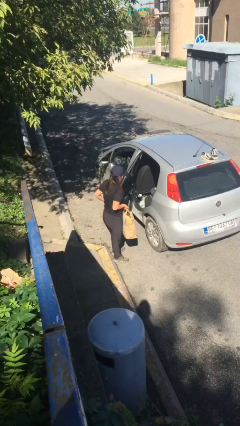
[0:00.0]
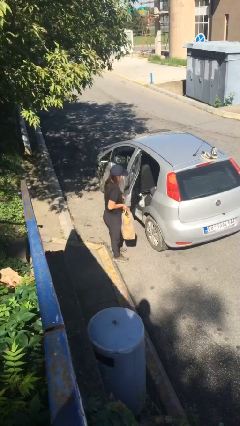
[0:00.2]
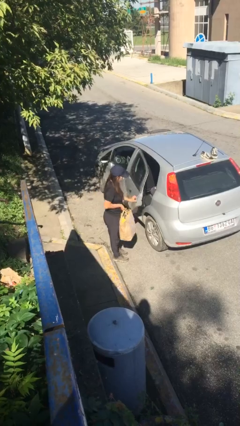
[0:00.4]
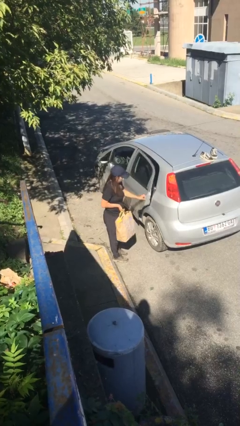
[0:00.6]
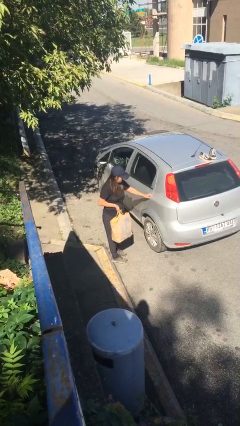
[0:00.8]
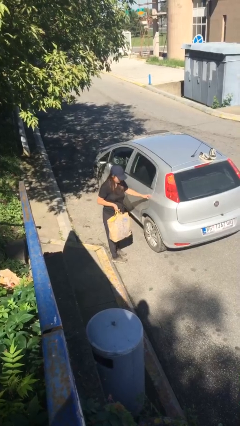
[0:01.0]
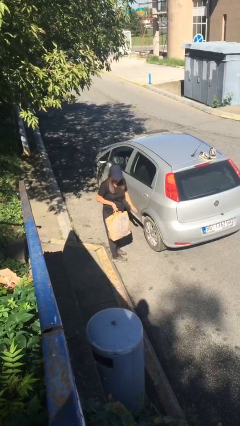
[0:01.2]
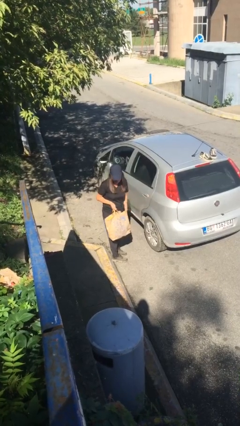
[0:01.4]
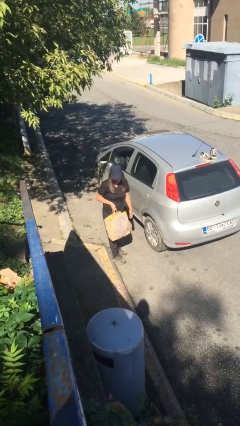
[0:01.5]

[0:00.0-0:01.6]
person closes car door

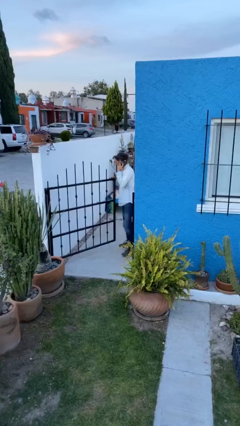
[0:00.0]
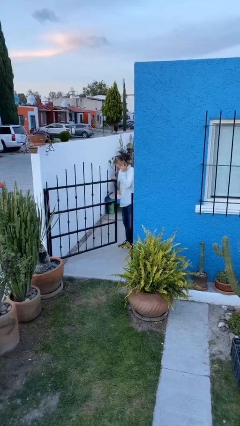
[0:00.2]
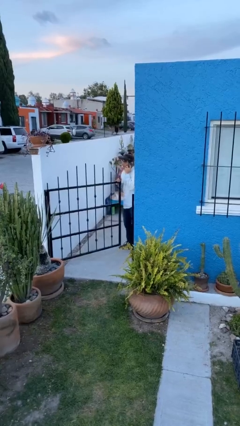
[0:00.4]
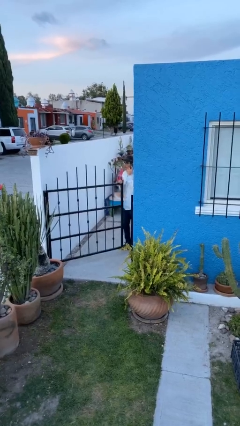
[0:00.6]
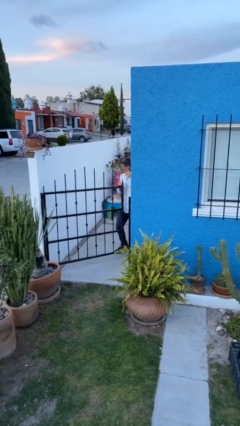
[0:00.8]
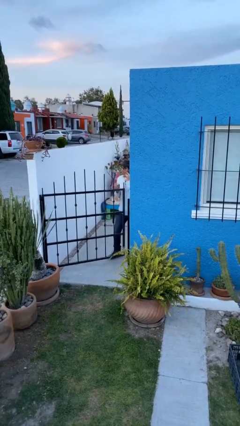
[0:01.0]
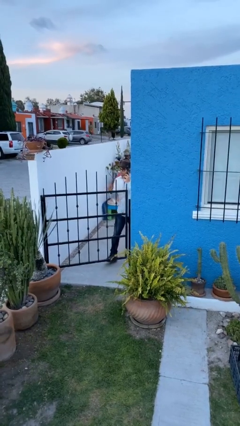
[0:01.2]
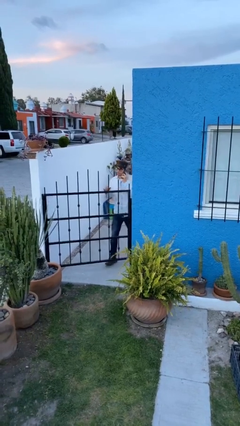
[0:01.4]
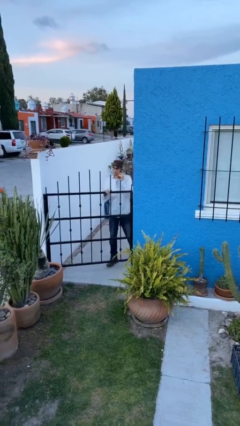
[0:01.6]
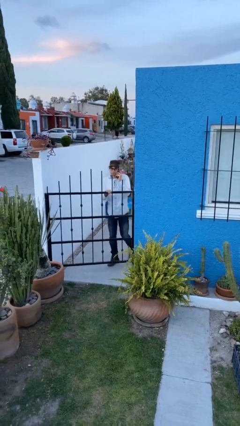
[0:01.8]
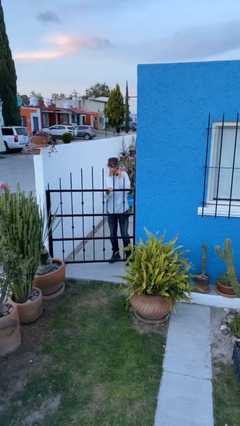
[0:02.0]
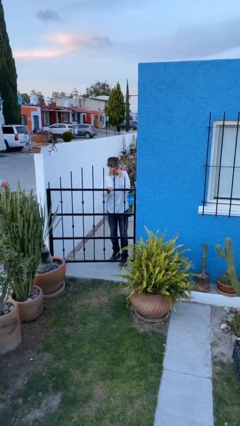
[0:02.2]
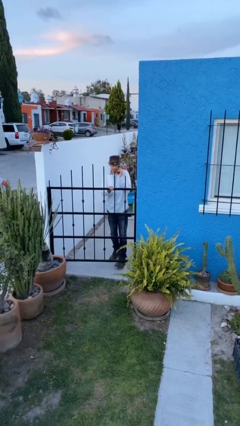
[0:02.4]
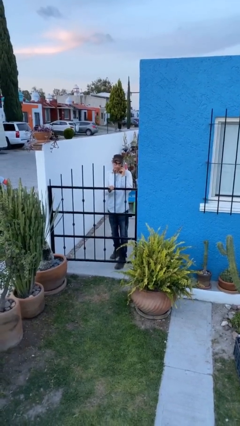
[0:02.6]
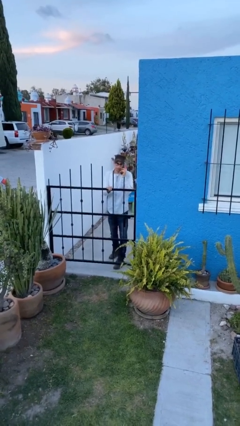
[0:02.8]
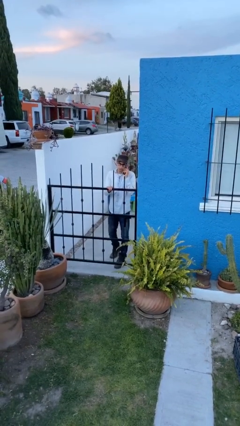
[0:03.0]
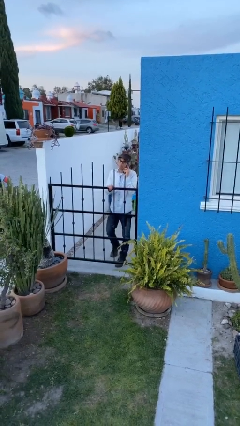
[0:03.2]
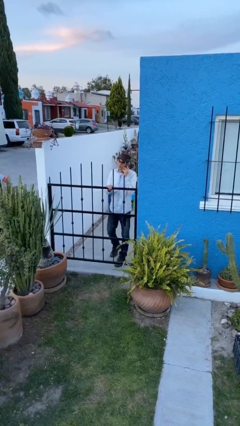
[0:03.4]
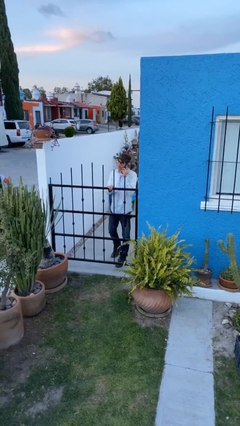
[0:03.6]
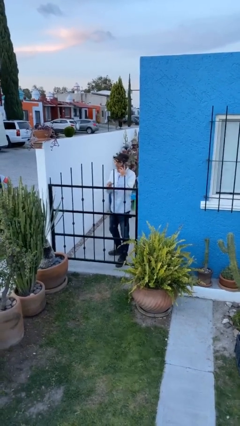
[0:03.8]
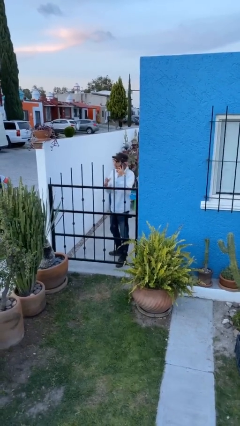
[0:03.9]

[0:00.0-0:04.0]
person closes facility door

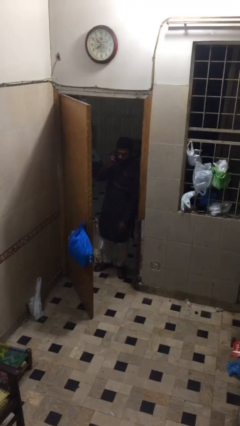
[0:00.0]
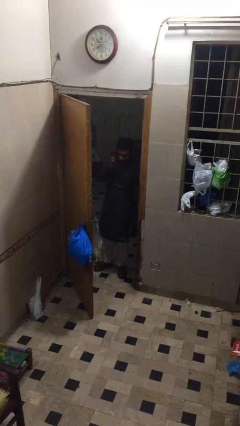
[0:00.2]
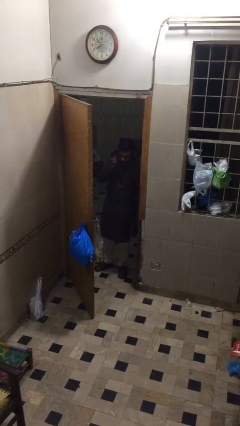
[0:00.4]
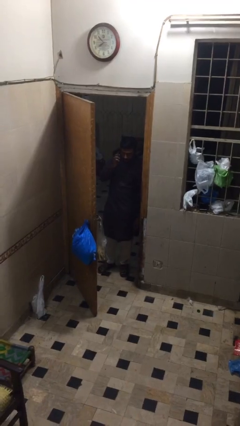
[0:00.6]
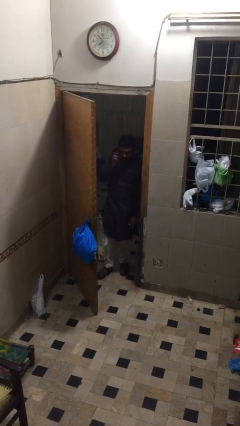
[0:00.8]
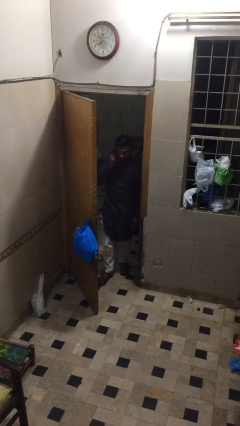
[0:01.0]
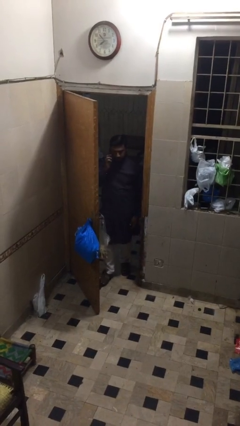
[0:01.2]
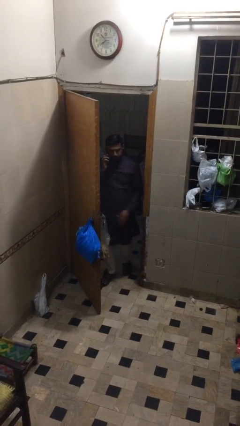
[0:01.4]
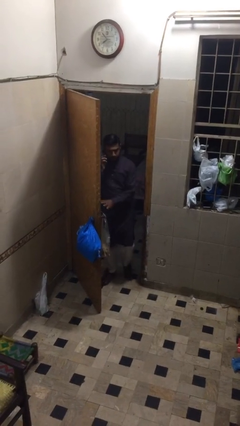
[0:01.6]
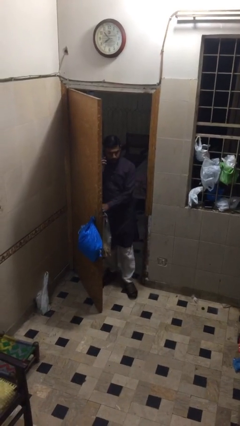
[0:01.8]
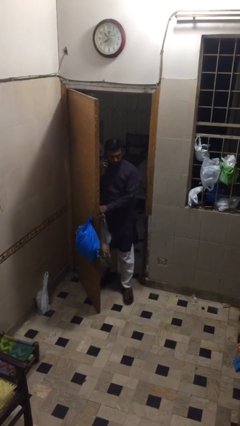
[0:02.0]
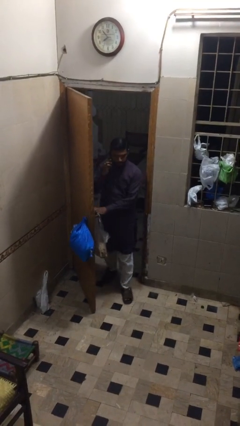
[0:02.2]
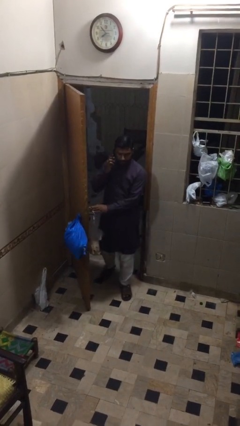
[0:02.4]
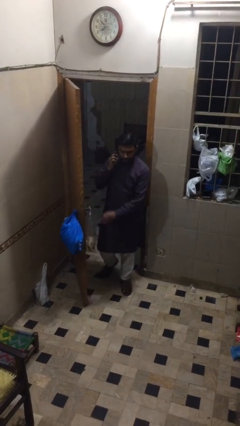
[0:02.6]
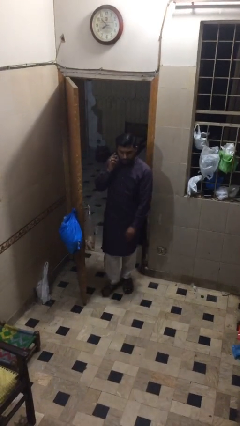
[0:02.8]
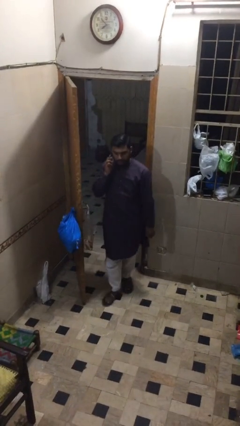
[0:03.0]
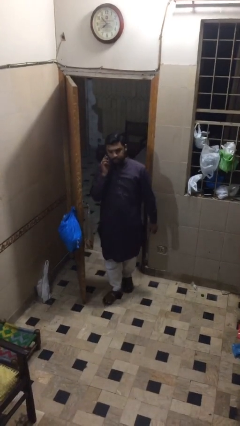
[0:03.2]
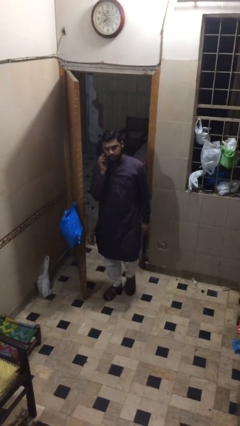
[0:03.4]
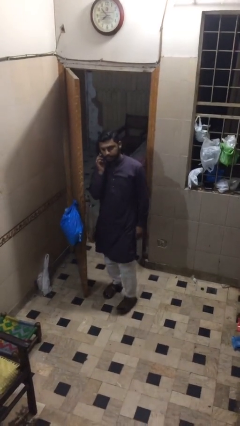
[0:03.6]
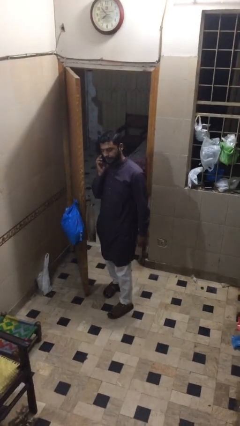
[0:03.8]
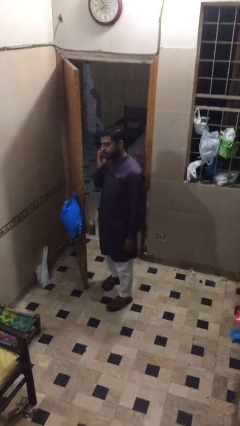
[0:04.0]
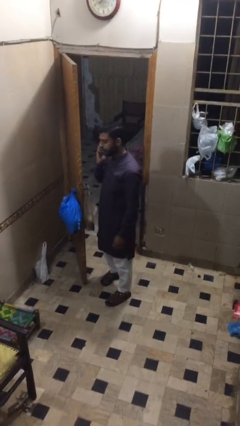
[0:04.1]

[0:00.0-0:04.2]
person enters scene through structure

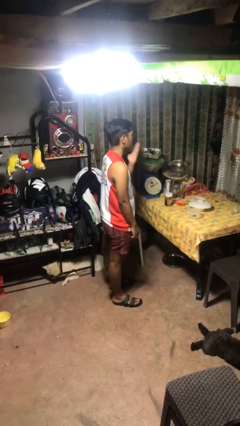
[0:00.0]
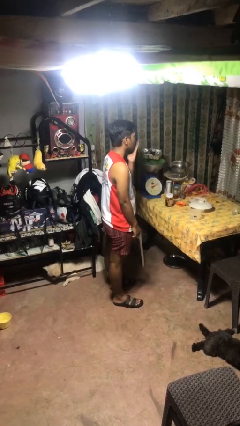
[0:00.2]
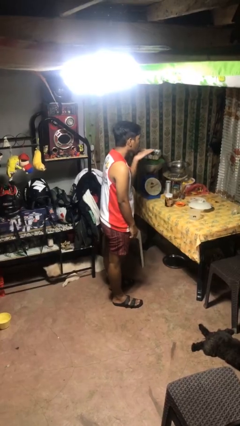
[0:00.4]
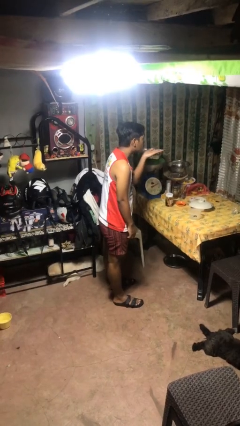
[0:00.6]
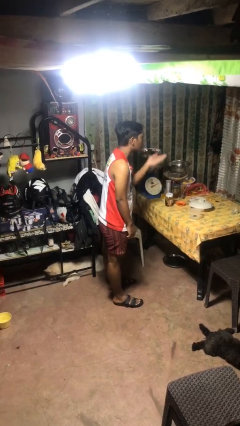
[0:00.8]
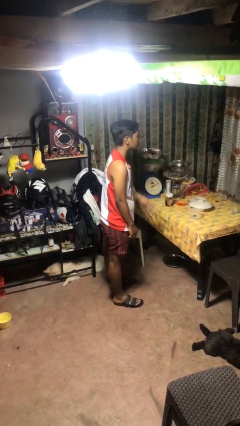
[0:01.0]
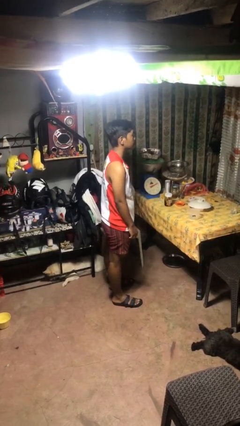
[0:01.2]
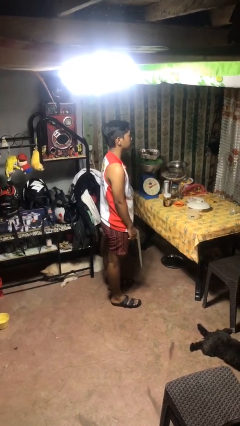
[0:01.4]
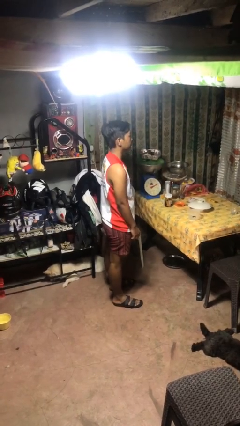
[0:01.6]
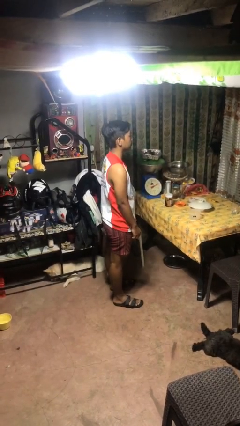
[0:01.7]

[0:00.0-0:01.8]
person gestures blow kiss

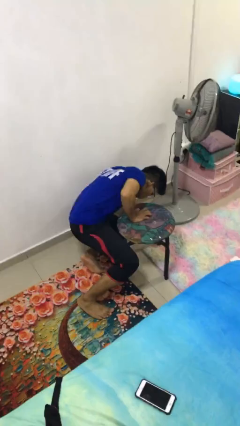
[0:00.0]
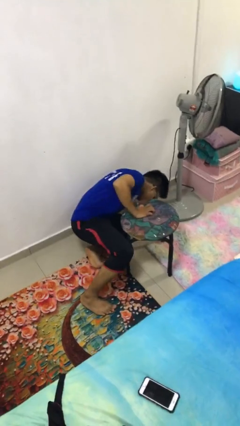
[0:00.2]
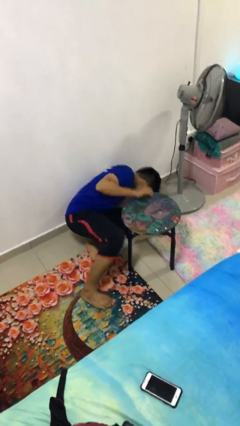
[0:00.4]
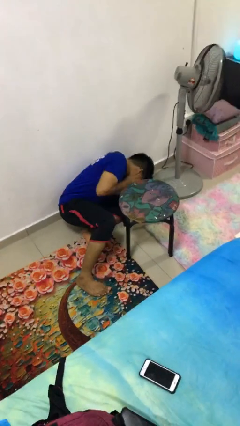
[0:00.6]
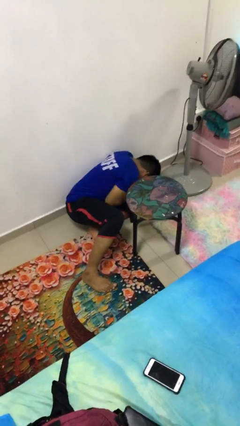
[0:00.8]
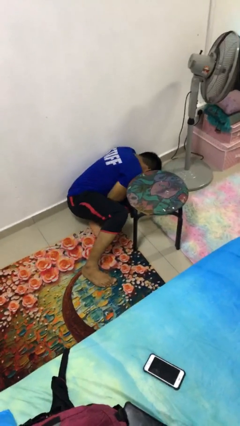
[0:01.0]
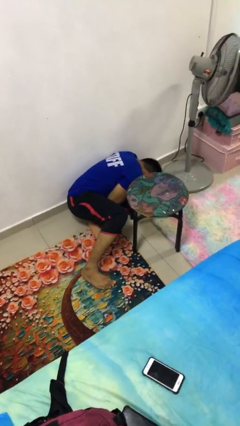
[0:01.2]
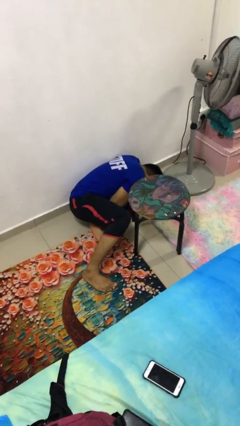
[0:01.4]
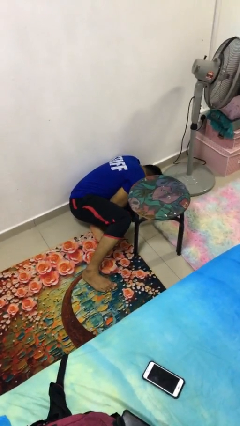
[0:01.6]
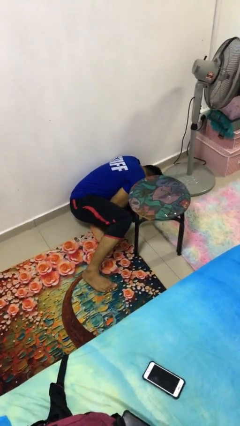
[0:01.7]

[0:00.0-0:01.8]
person lies down on floor

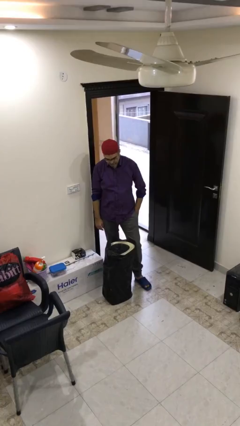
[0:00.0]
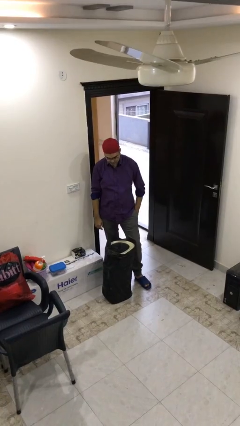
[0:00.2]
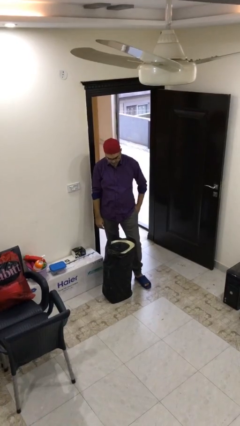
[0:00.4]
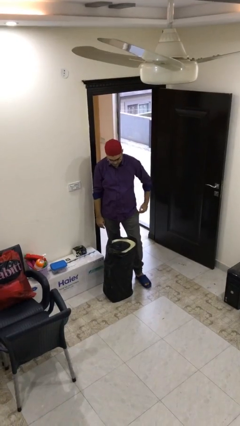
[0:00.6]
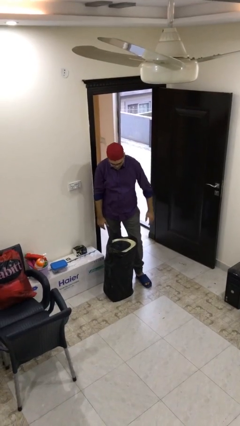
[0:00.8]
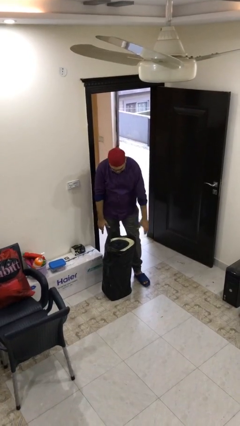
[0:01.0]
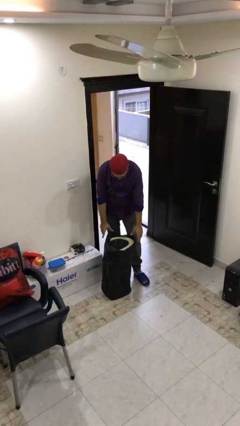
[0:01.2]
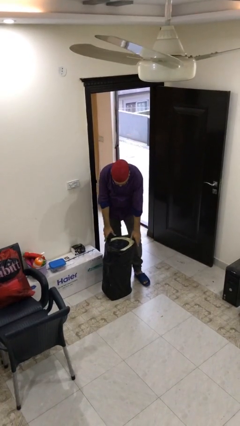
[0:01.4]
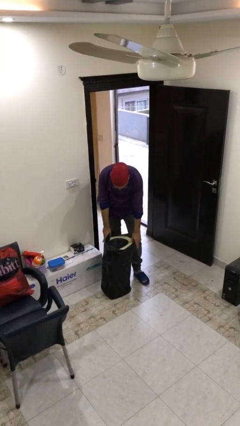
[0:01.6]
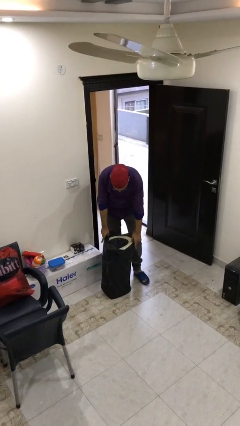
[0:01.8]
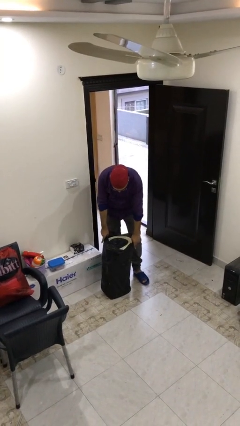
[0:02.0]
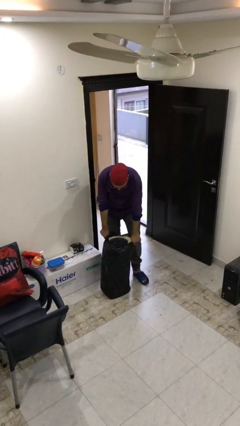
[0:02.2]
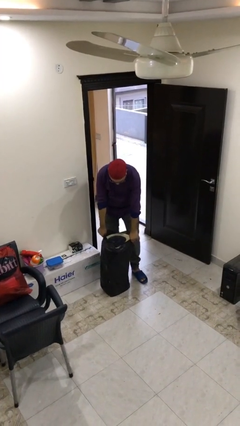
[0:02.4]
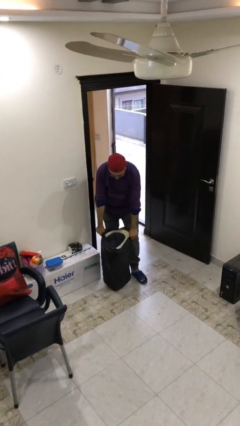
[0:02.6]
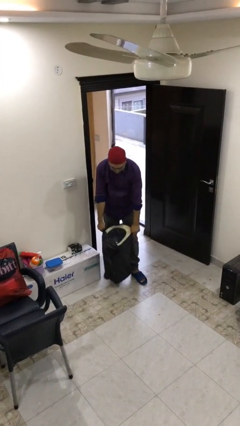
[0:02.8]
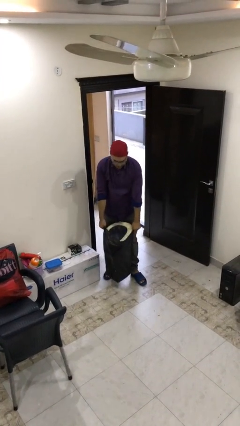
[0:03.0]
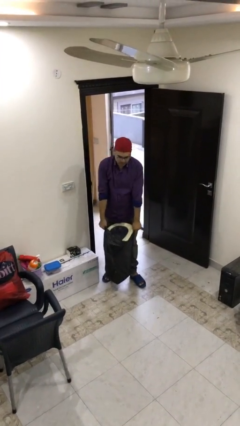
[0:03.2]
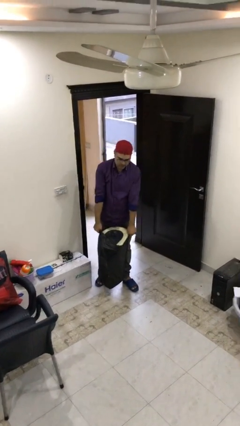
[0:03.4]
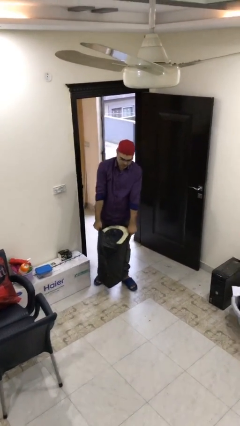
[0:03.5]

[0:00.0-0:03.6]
person picks up object from floor

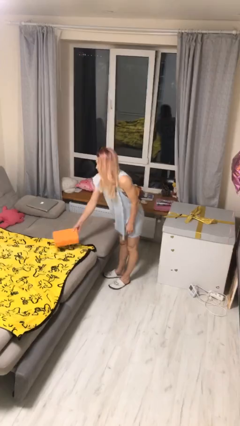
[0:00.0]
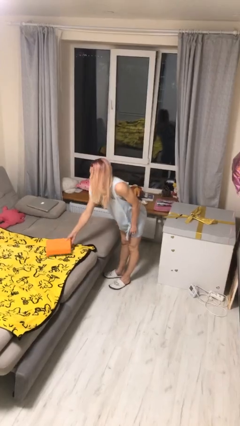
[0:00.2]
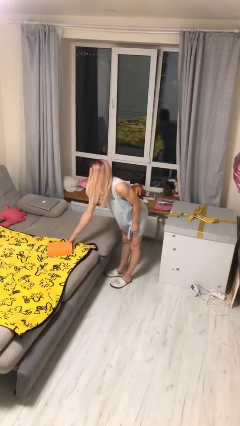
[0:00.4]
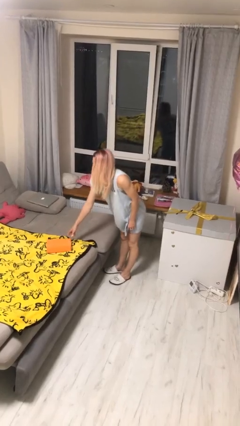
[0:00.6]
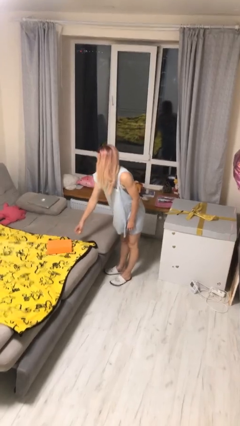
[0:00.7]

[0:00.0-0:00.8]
person puts down object on bed
